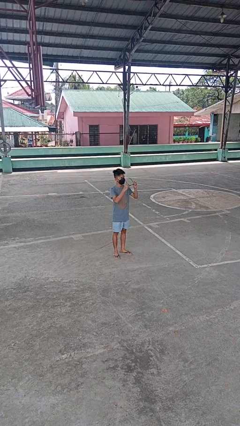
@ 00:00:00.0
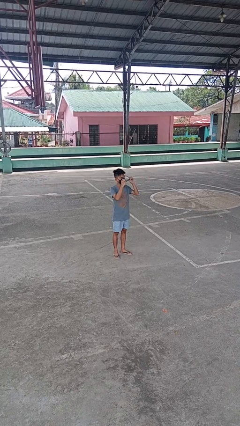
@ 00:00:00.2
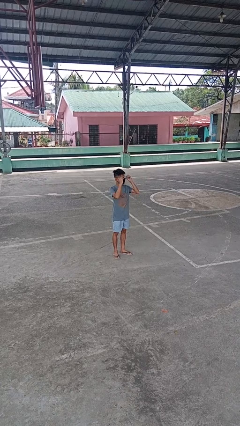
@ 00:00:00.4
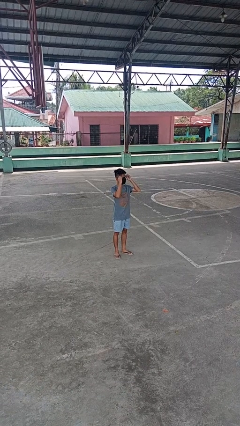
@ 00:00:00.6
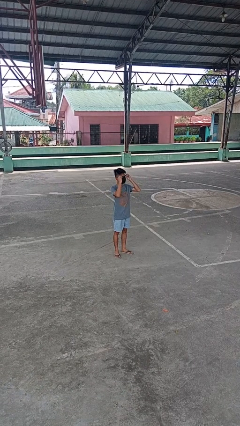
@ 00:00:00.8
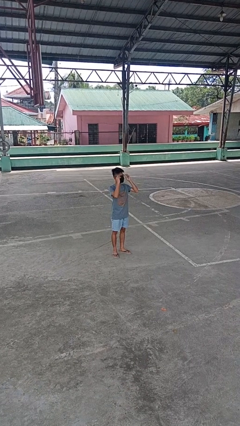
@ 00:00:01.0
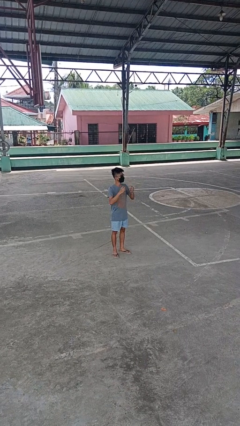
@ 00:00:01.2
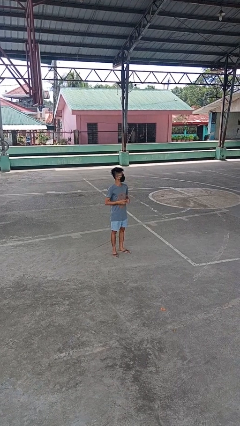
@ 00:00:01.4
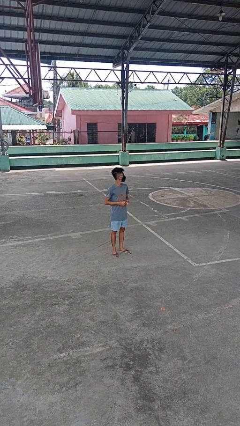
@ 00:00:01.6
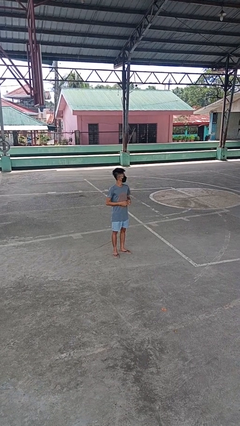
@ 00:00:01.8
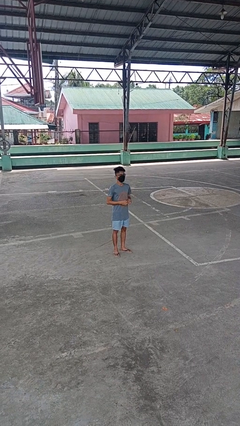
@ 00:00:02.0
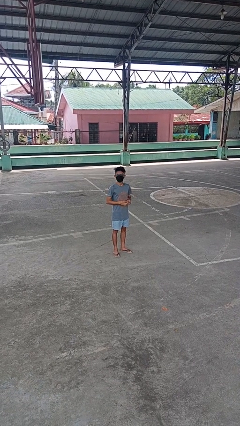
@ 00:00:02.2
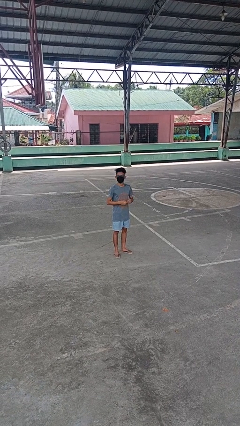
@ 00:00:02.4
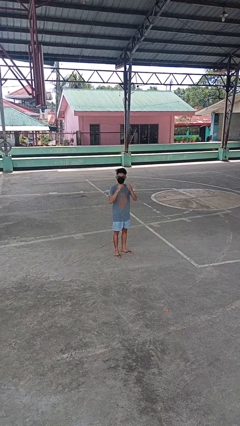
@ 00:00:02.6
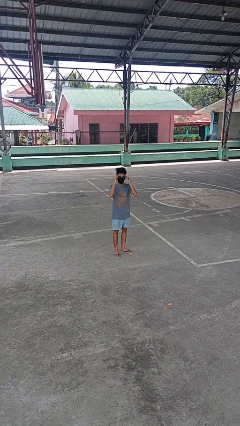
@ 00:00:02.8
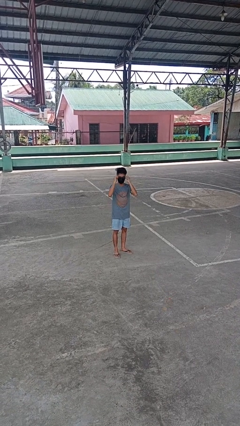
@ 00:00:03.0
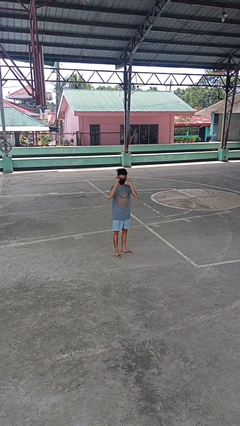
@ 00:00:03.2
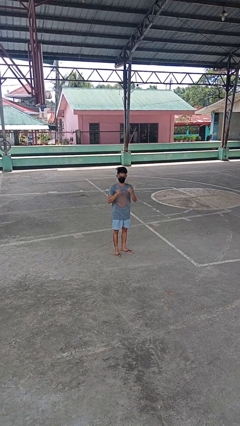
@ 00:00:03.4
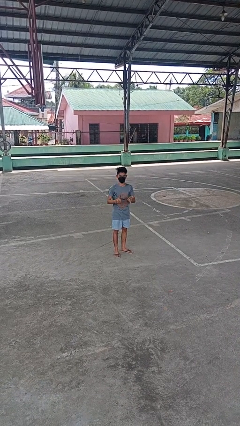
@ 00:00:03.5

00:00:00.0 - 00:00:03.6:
person puts on glasses

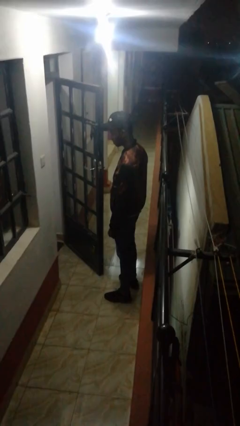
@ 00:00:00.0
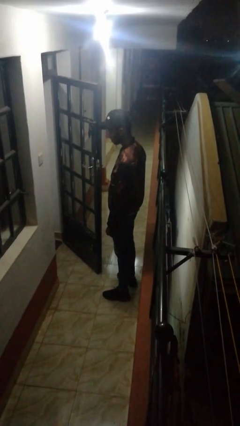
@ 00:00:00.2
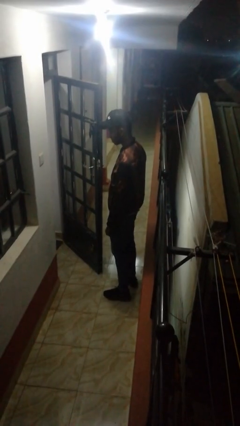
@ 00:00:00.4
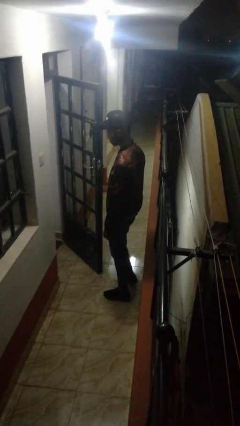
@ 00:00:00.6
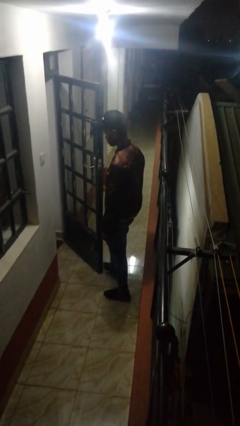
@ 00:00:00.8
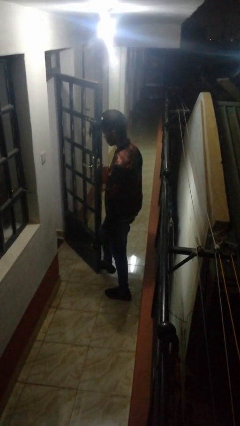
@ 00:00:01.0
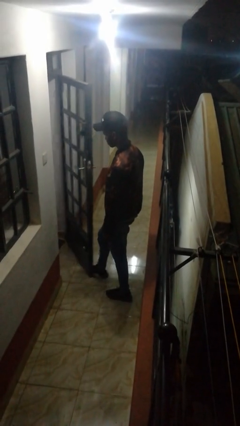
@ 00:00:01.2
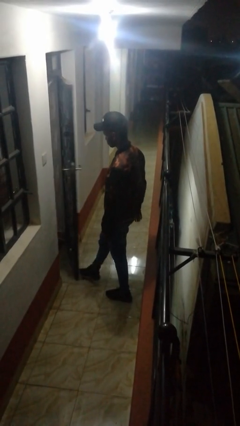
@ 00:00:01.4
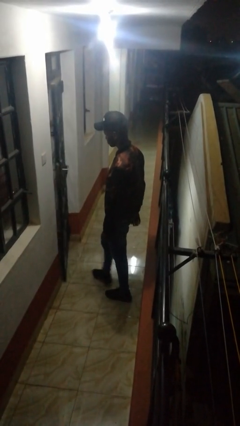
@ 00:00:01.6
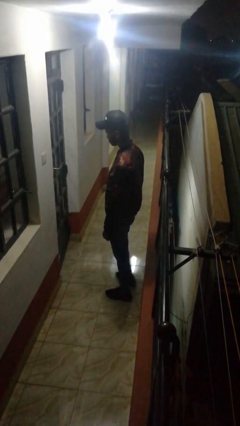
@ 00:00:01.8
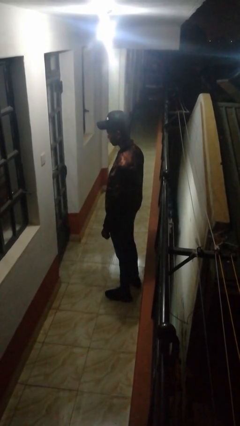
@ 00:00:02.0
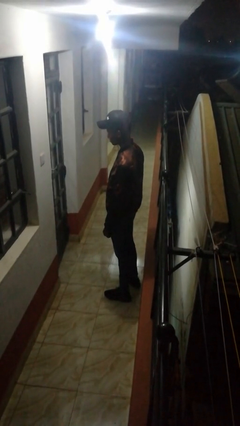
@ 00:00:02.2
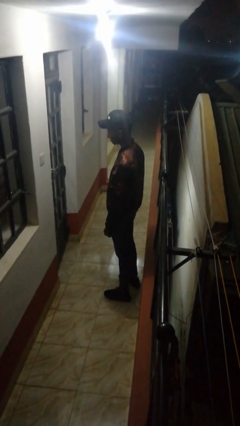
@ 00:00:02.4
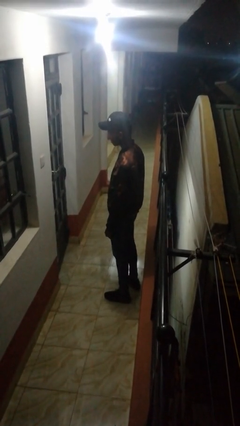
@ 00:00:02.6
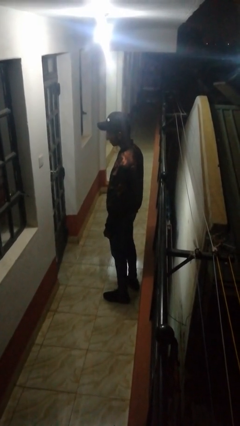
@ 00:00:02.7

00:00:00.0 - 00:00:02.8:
person closes door with foot

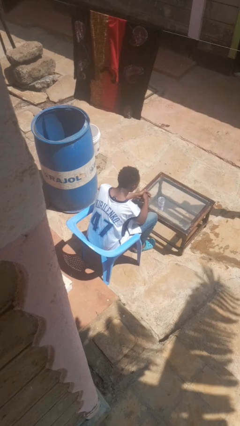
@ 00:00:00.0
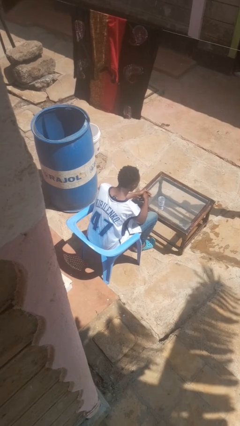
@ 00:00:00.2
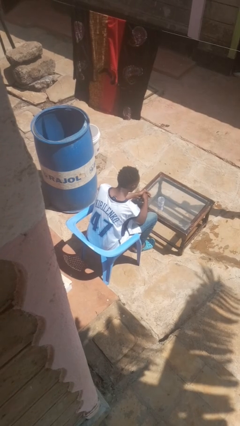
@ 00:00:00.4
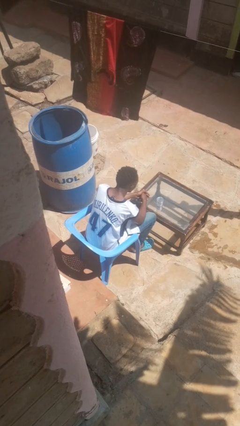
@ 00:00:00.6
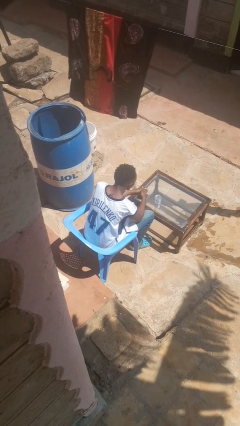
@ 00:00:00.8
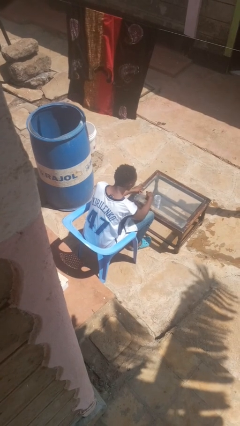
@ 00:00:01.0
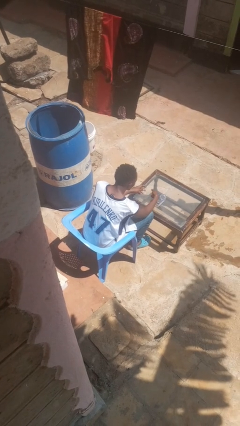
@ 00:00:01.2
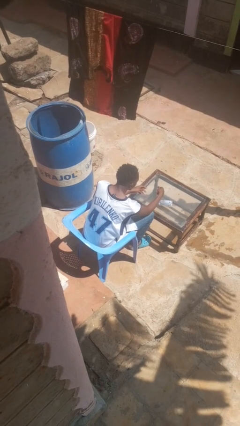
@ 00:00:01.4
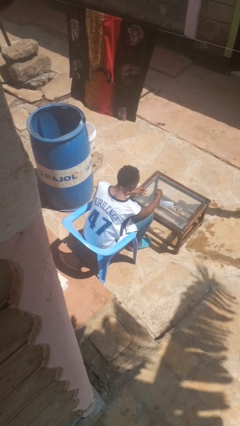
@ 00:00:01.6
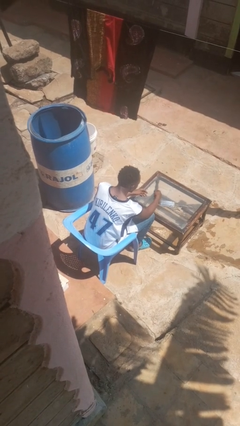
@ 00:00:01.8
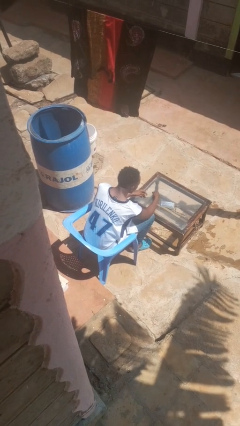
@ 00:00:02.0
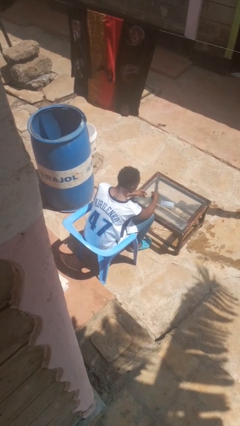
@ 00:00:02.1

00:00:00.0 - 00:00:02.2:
person spills on table

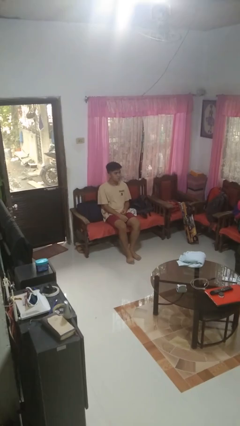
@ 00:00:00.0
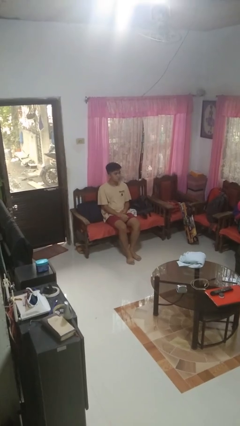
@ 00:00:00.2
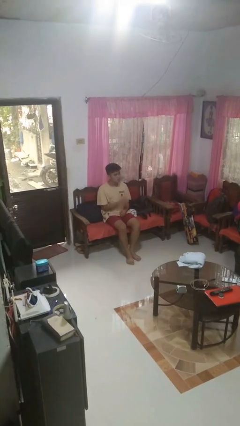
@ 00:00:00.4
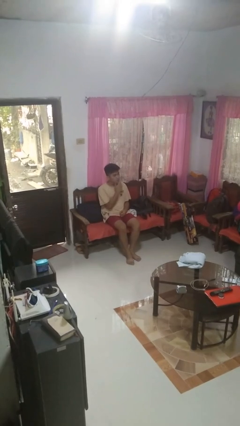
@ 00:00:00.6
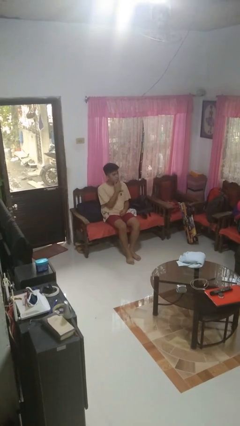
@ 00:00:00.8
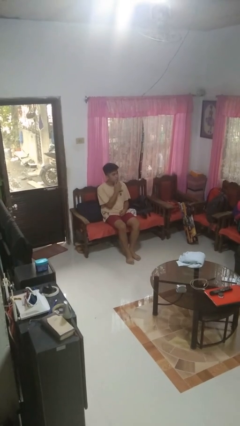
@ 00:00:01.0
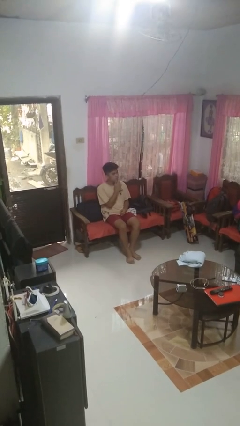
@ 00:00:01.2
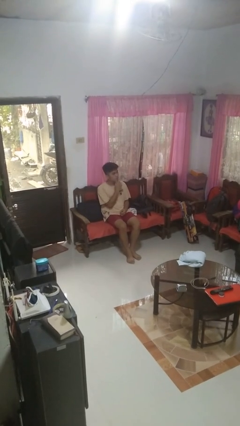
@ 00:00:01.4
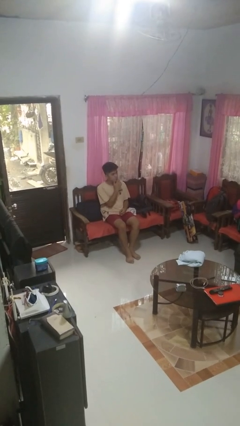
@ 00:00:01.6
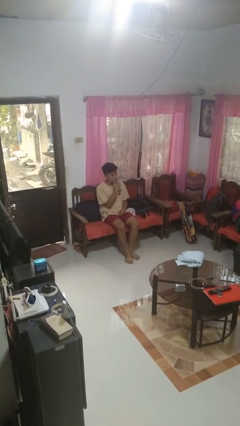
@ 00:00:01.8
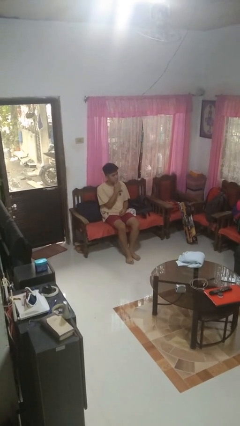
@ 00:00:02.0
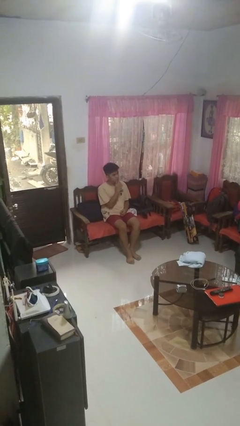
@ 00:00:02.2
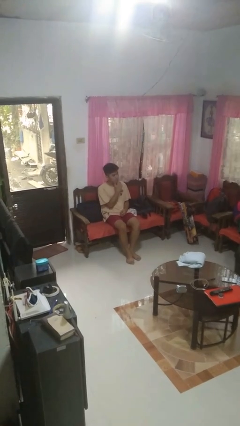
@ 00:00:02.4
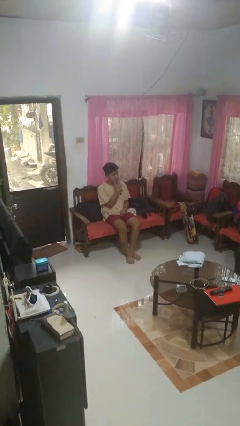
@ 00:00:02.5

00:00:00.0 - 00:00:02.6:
person strokes chin

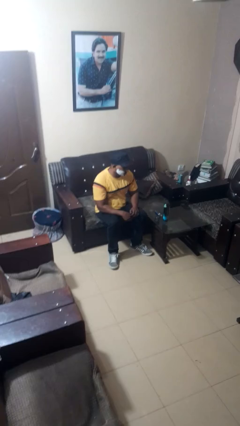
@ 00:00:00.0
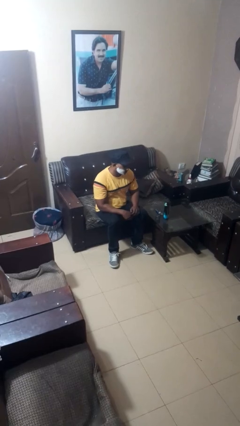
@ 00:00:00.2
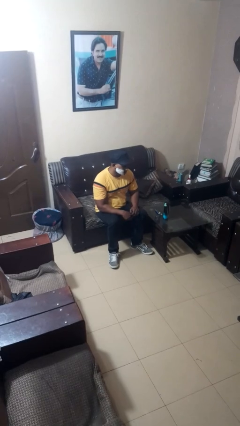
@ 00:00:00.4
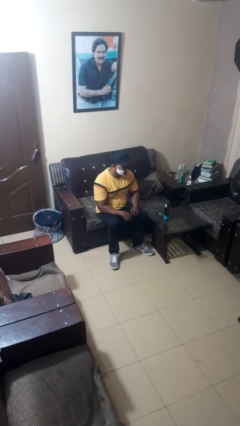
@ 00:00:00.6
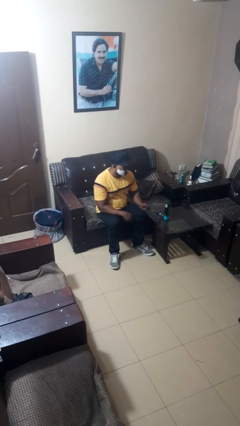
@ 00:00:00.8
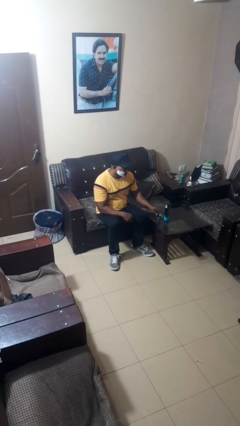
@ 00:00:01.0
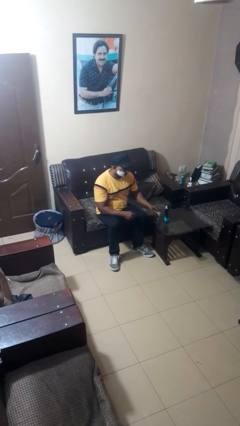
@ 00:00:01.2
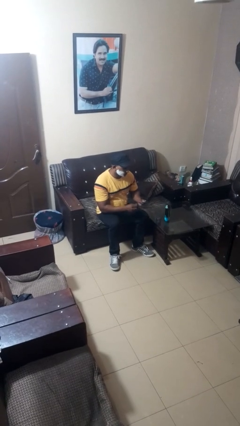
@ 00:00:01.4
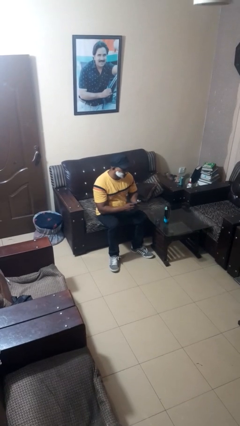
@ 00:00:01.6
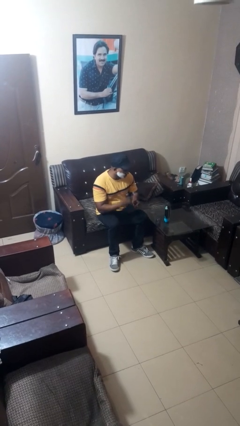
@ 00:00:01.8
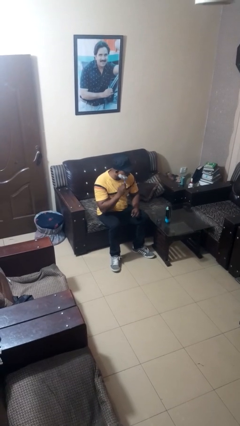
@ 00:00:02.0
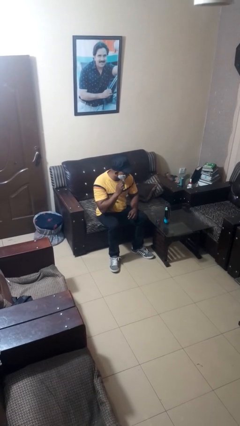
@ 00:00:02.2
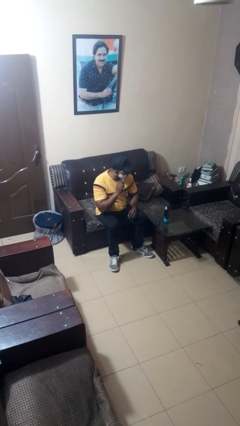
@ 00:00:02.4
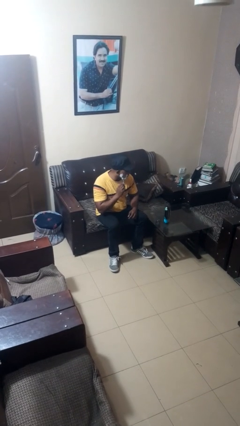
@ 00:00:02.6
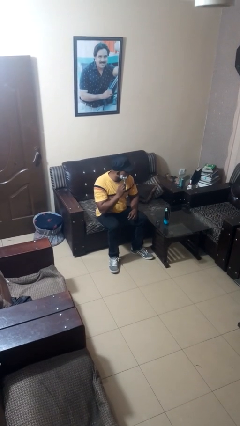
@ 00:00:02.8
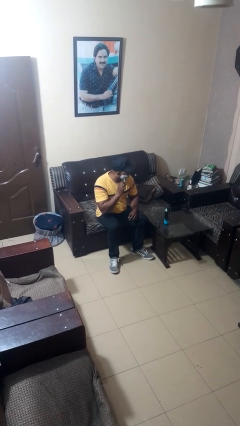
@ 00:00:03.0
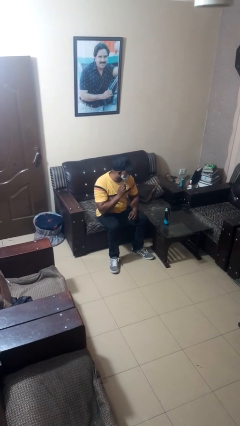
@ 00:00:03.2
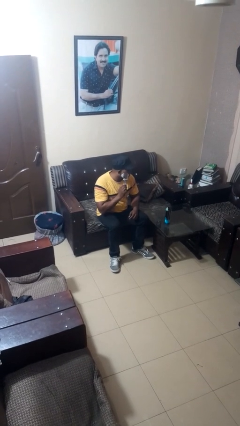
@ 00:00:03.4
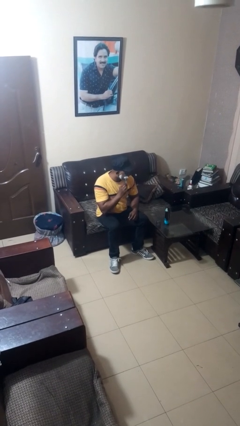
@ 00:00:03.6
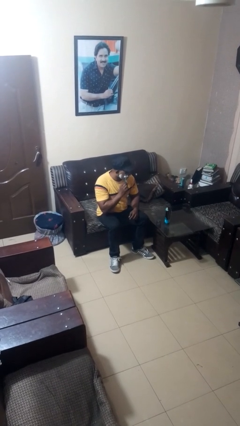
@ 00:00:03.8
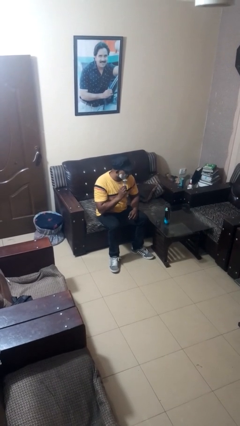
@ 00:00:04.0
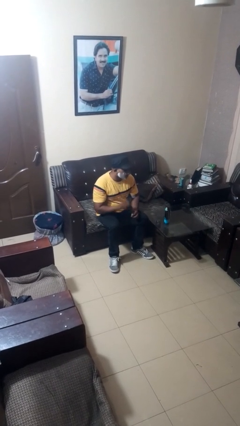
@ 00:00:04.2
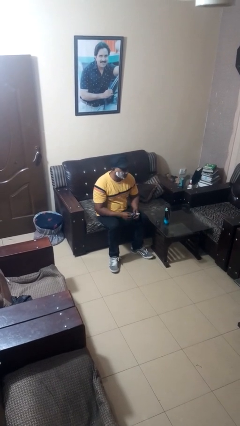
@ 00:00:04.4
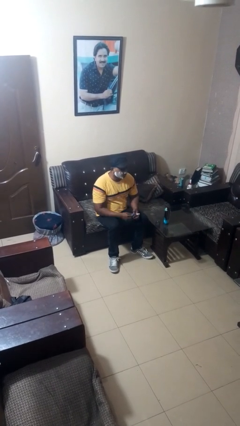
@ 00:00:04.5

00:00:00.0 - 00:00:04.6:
person shaves face

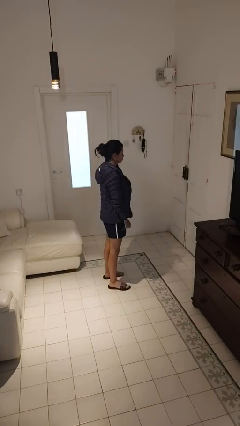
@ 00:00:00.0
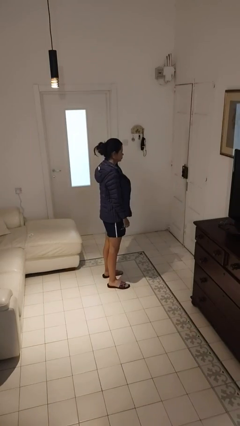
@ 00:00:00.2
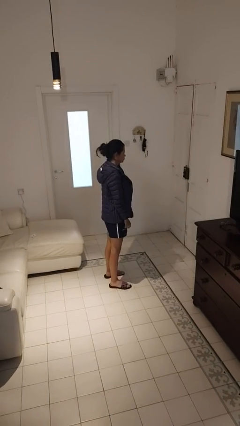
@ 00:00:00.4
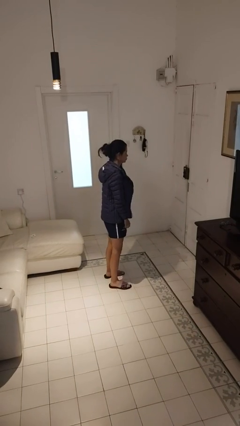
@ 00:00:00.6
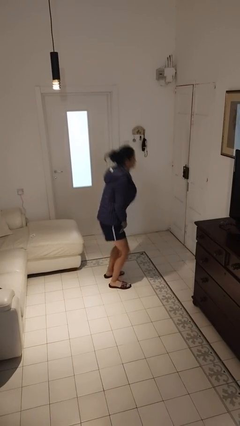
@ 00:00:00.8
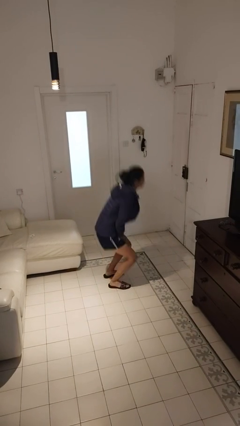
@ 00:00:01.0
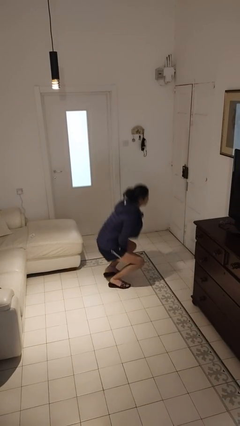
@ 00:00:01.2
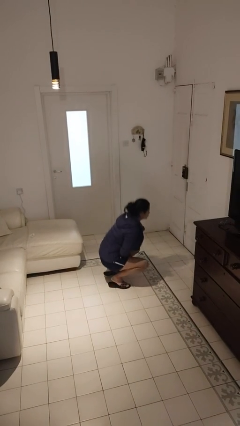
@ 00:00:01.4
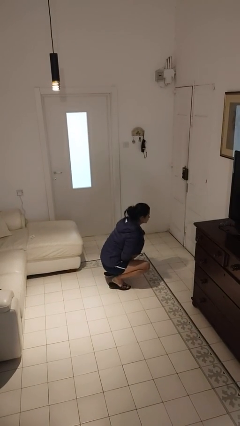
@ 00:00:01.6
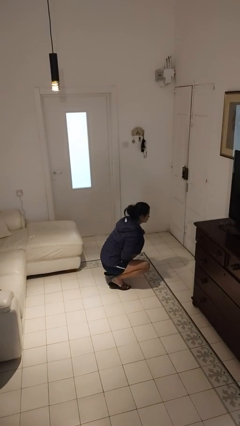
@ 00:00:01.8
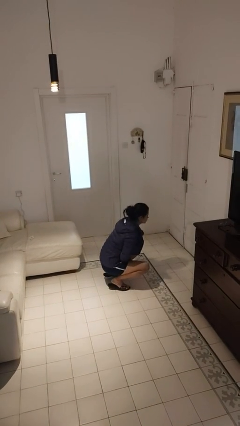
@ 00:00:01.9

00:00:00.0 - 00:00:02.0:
person squats
